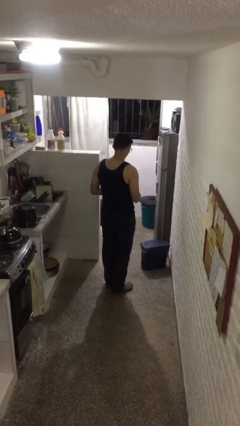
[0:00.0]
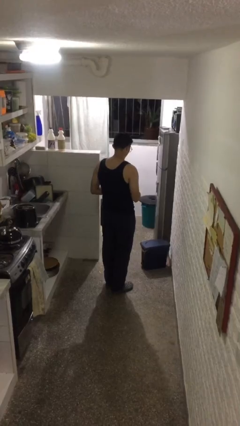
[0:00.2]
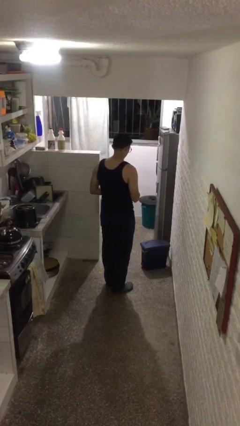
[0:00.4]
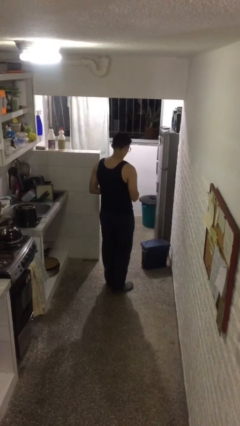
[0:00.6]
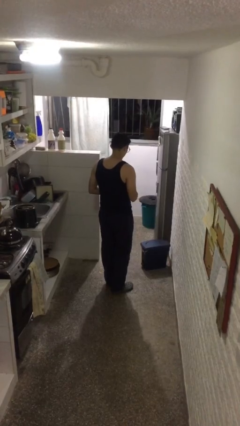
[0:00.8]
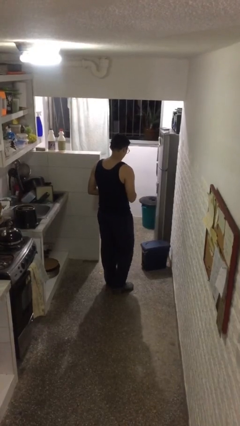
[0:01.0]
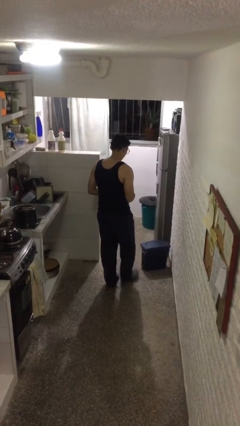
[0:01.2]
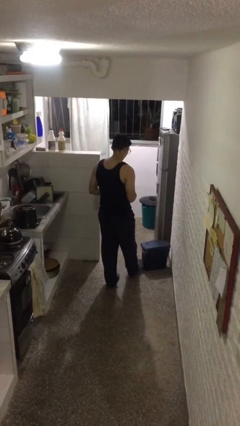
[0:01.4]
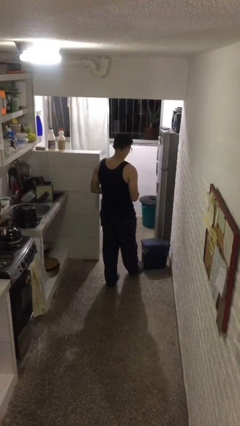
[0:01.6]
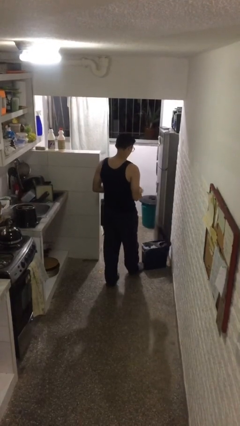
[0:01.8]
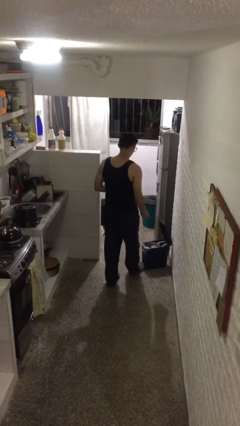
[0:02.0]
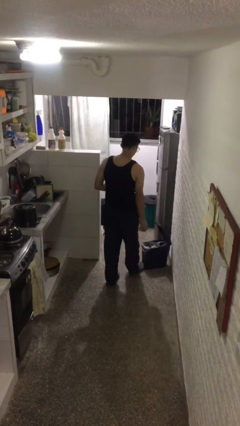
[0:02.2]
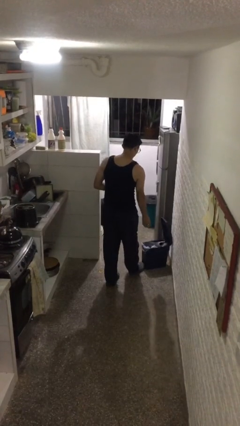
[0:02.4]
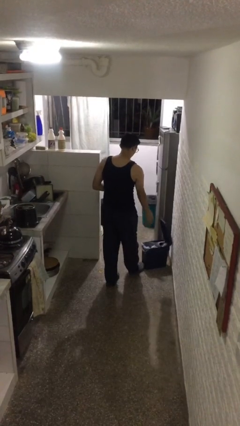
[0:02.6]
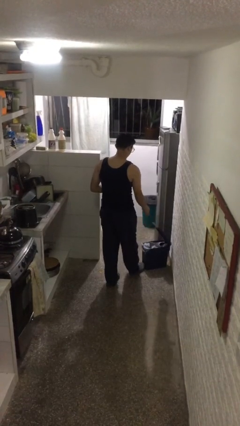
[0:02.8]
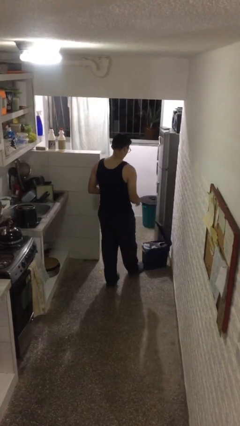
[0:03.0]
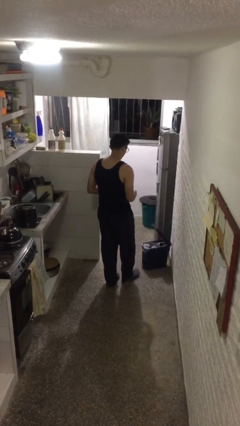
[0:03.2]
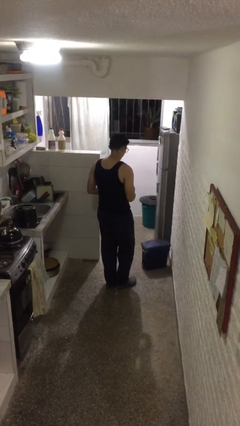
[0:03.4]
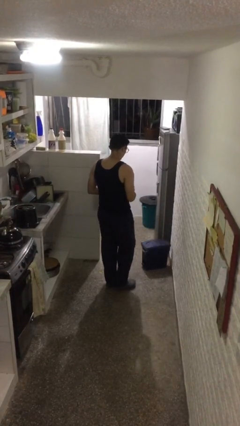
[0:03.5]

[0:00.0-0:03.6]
person discards trash

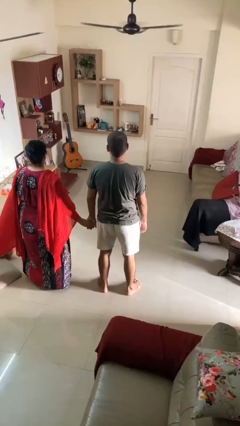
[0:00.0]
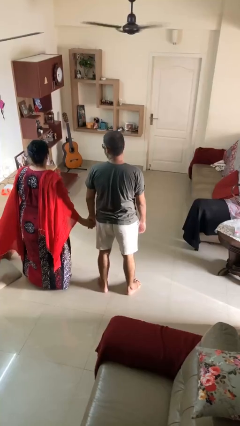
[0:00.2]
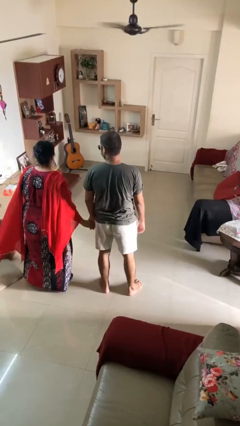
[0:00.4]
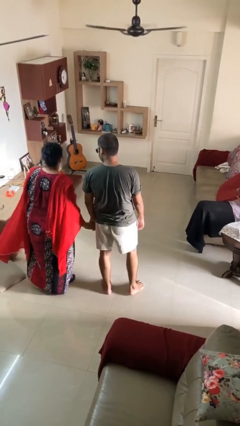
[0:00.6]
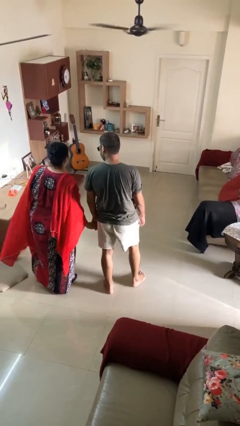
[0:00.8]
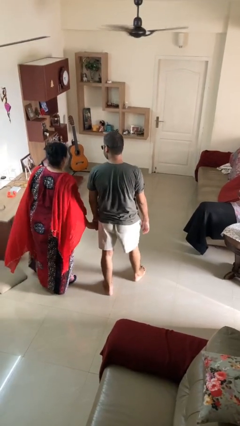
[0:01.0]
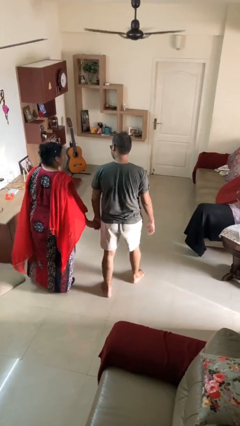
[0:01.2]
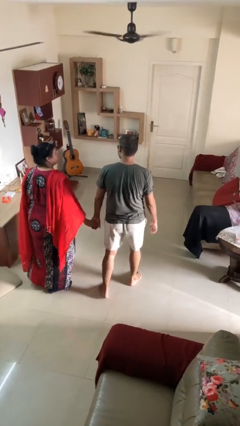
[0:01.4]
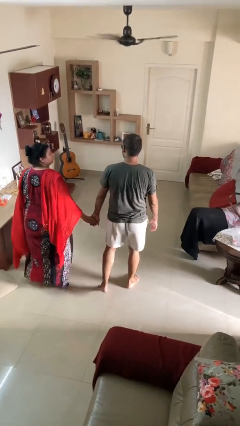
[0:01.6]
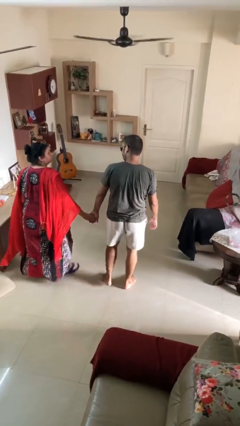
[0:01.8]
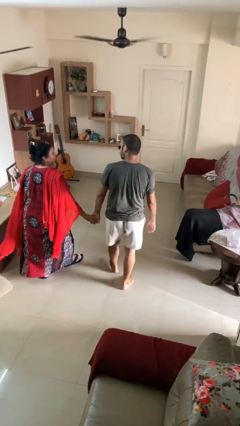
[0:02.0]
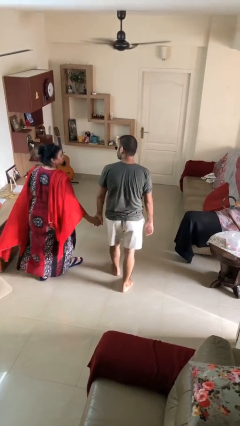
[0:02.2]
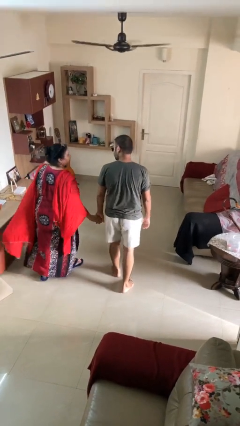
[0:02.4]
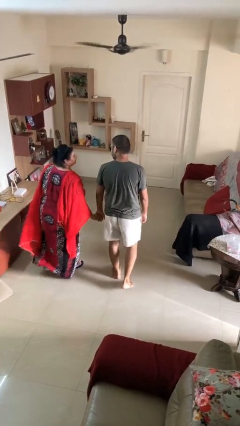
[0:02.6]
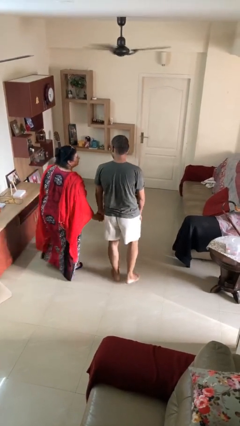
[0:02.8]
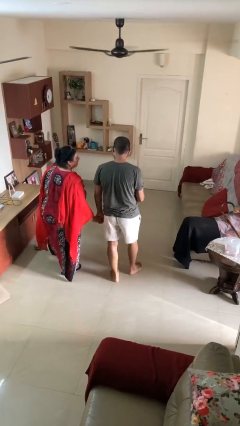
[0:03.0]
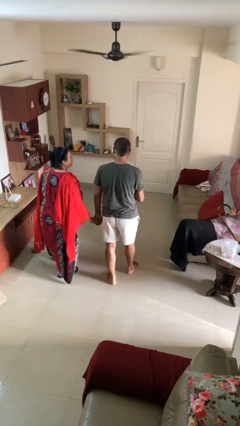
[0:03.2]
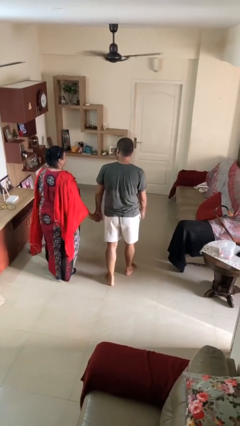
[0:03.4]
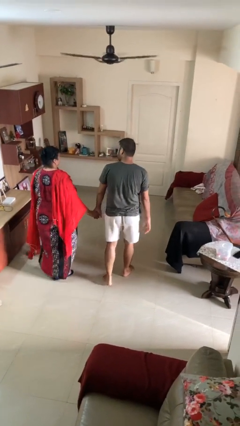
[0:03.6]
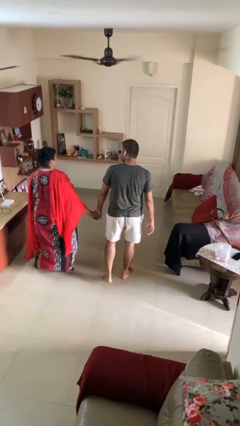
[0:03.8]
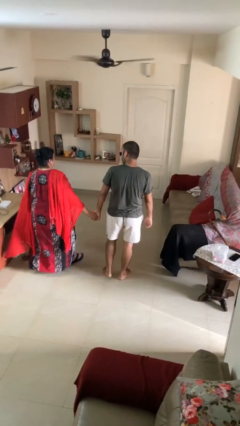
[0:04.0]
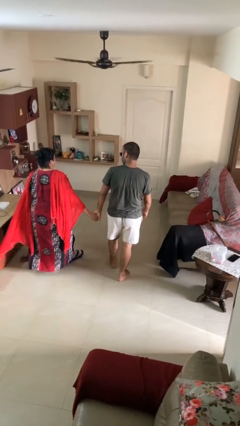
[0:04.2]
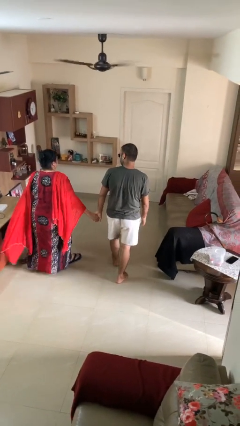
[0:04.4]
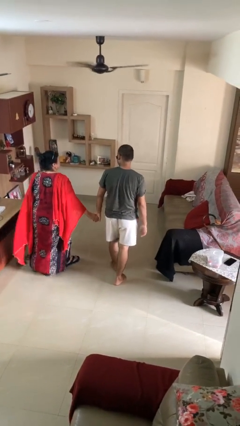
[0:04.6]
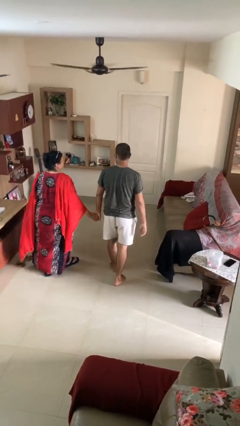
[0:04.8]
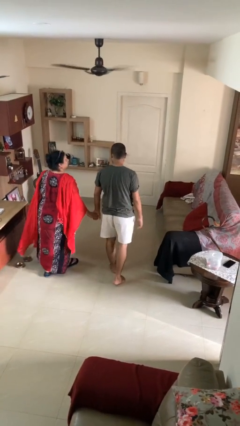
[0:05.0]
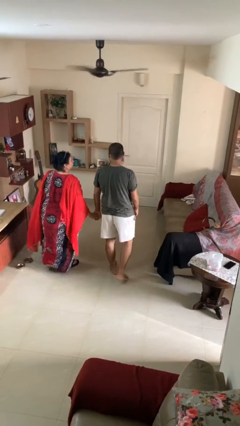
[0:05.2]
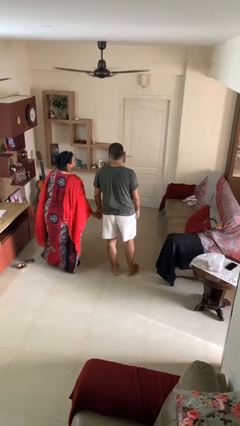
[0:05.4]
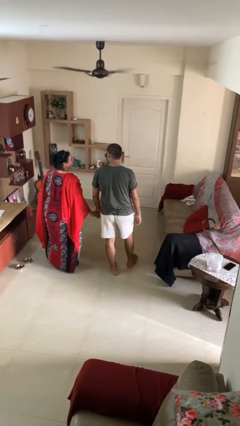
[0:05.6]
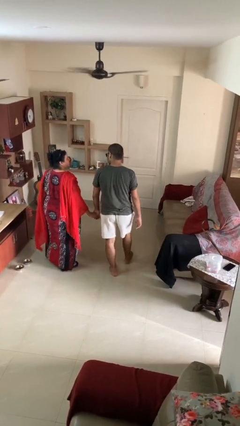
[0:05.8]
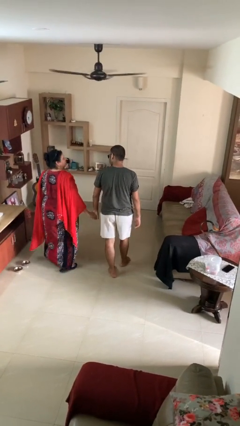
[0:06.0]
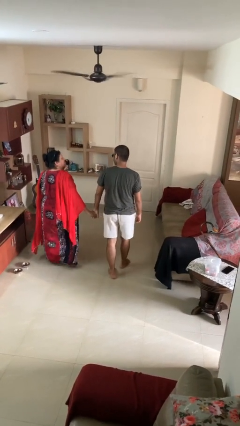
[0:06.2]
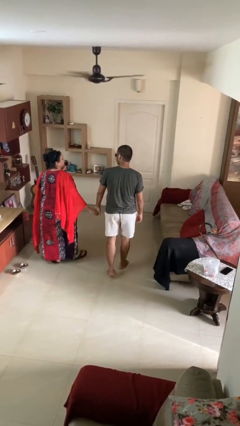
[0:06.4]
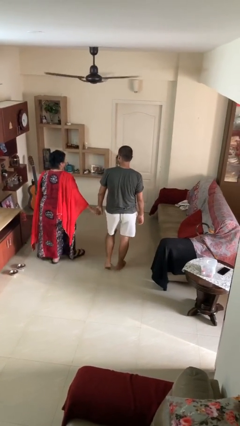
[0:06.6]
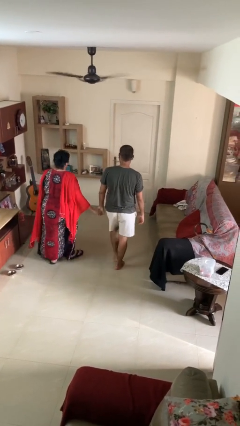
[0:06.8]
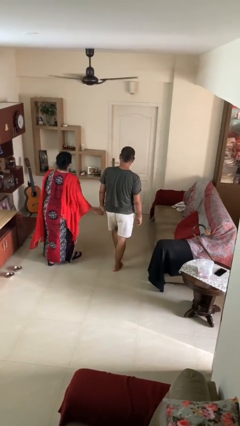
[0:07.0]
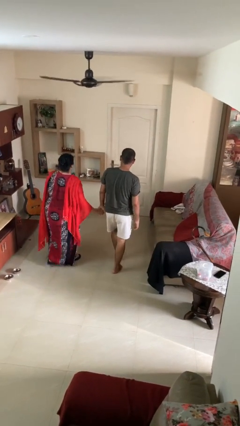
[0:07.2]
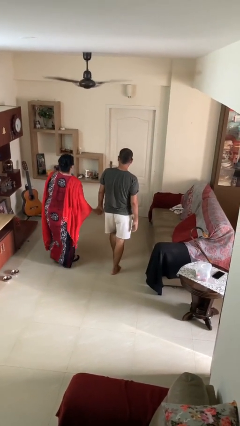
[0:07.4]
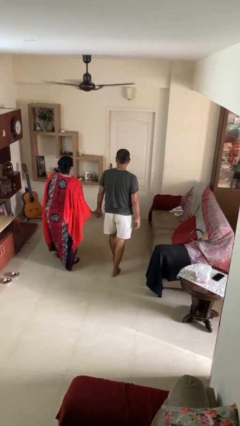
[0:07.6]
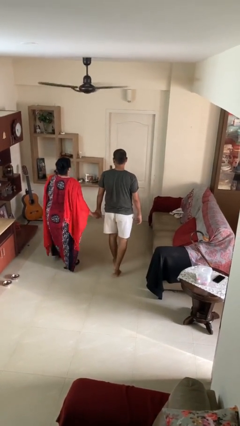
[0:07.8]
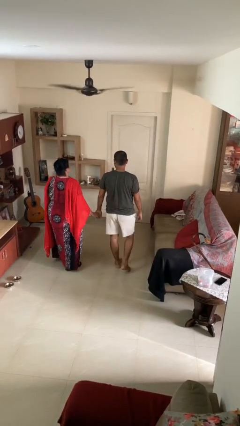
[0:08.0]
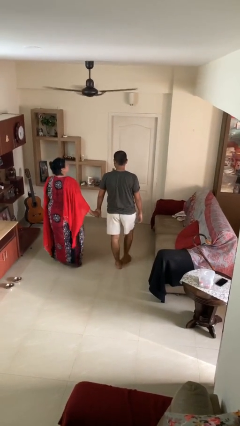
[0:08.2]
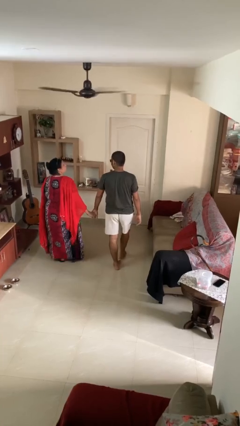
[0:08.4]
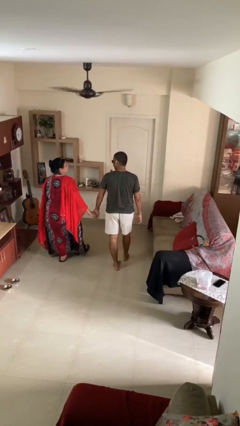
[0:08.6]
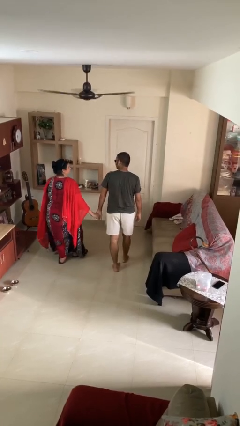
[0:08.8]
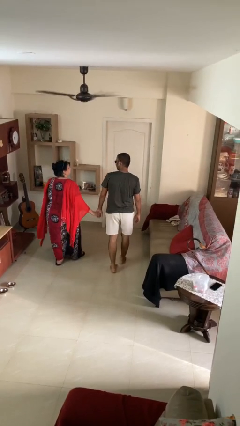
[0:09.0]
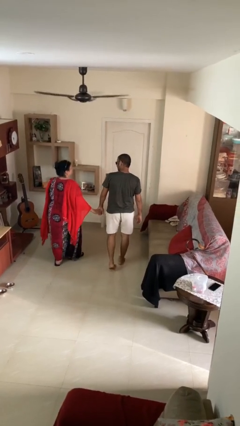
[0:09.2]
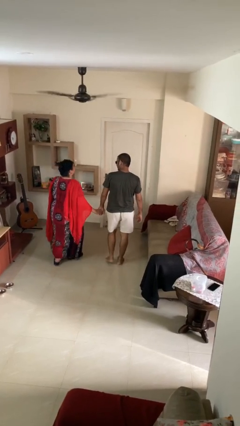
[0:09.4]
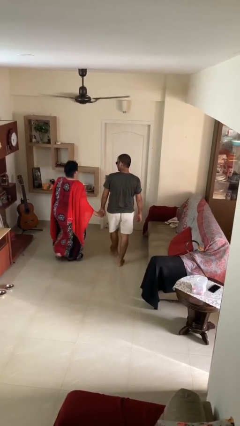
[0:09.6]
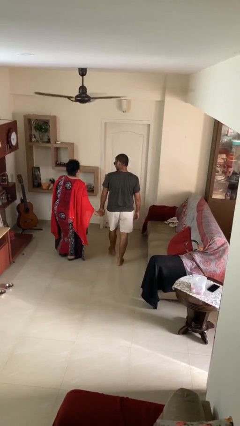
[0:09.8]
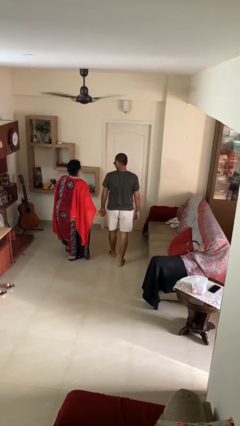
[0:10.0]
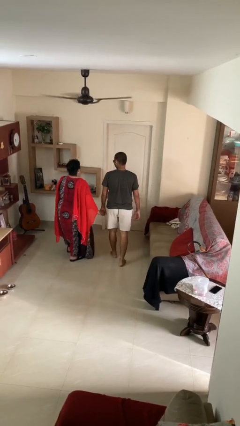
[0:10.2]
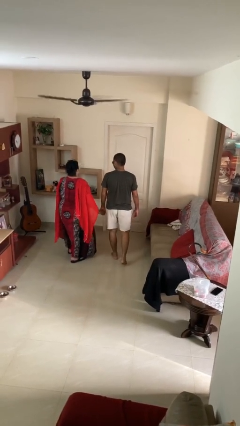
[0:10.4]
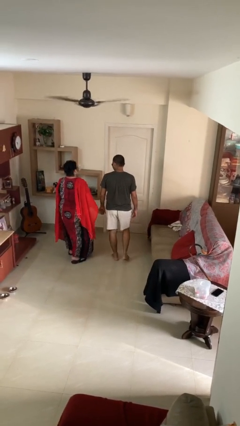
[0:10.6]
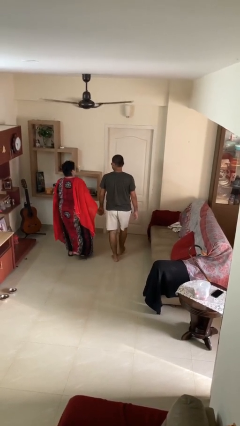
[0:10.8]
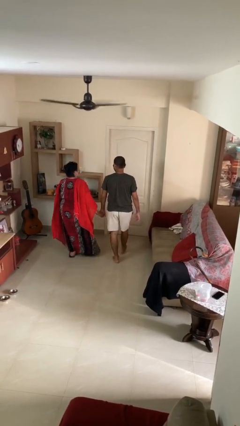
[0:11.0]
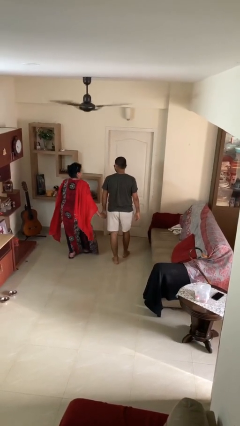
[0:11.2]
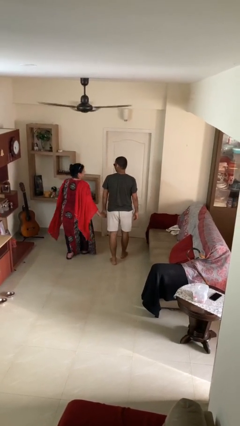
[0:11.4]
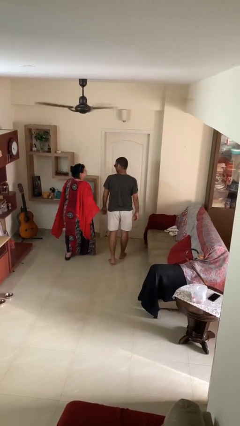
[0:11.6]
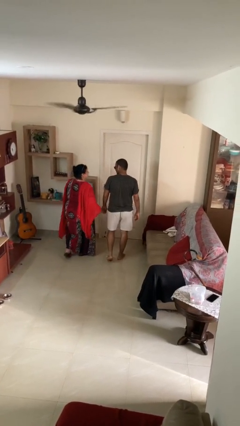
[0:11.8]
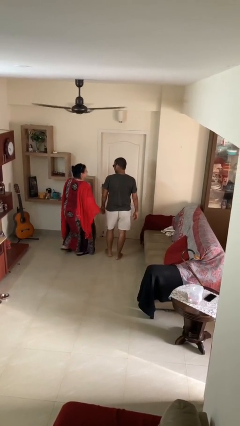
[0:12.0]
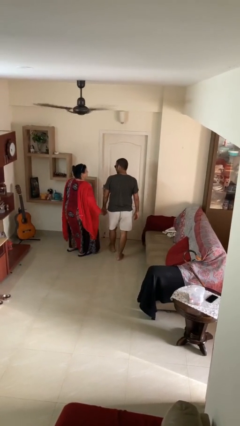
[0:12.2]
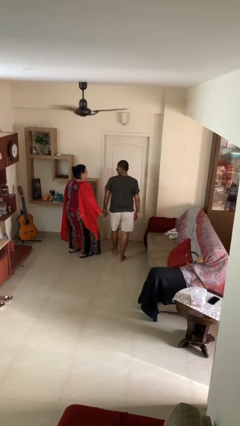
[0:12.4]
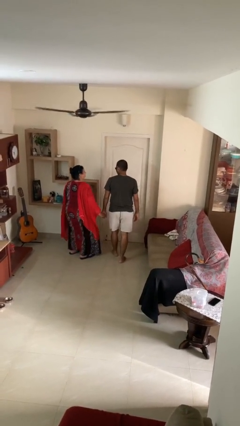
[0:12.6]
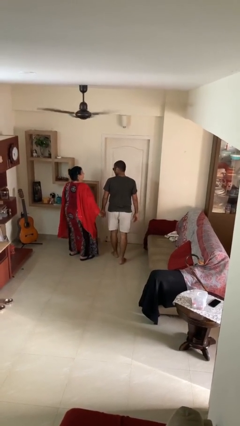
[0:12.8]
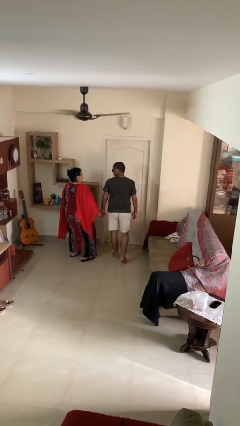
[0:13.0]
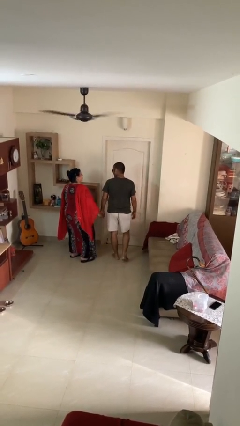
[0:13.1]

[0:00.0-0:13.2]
person holds hand

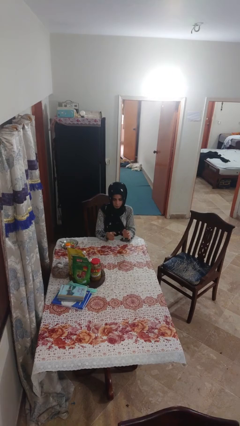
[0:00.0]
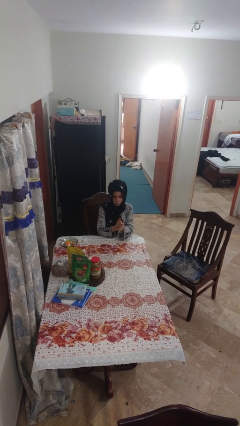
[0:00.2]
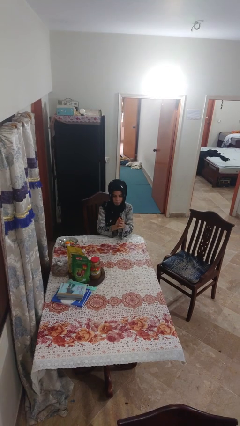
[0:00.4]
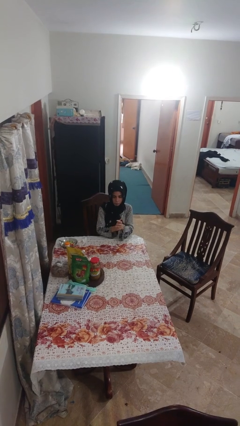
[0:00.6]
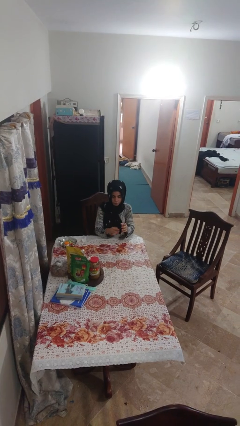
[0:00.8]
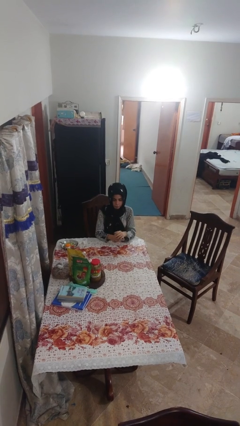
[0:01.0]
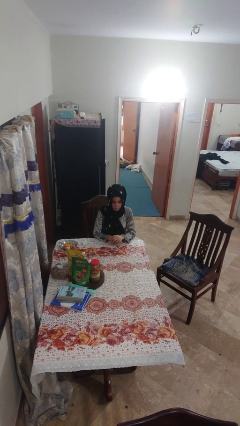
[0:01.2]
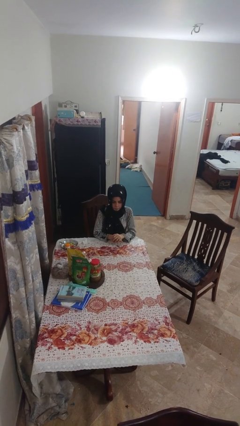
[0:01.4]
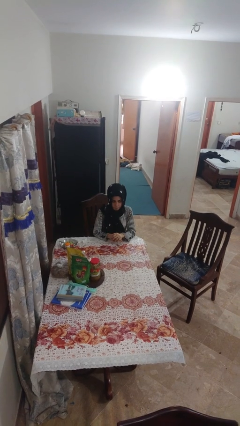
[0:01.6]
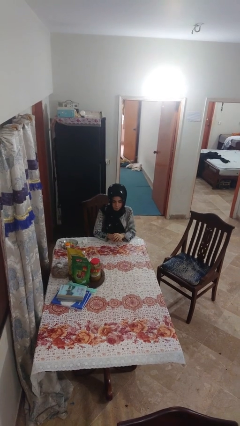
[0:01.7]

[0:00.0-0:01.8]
person claps hands
